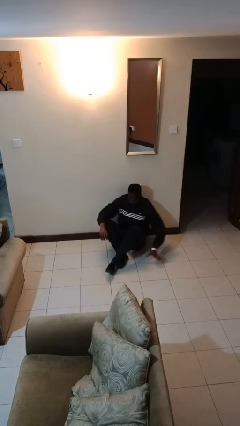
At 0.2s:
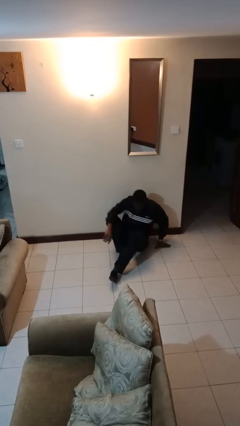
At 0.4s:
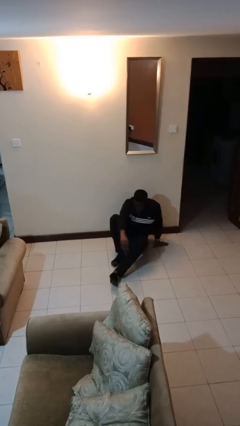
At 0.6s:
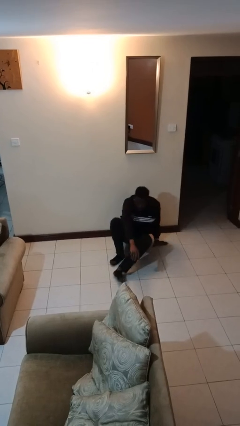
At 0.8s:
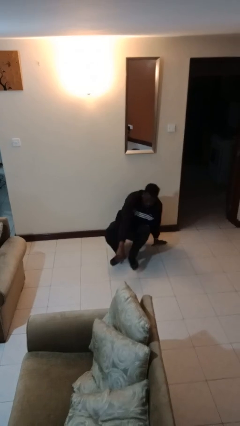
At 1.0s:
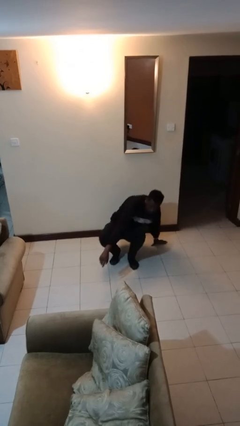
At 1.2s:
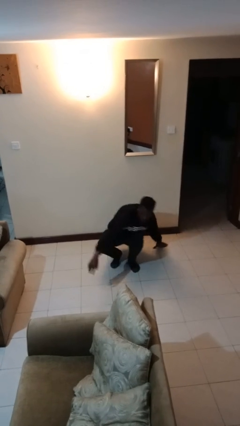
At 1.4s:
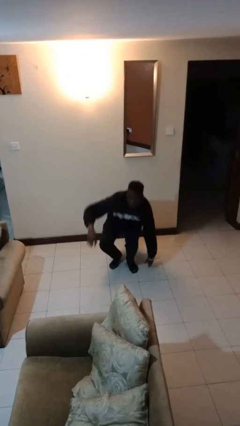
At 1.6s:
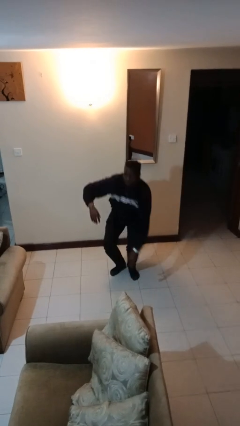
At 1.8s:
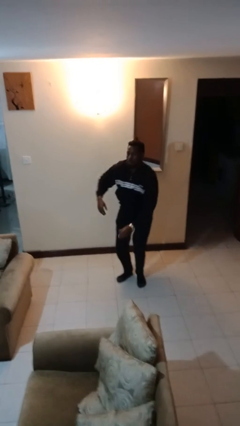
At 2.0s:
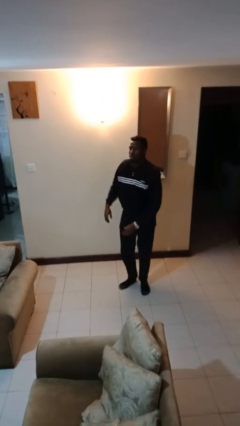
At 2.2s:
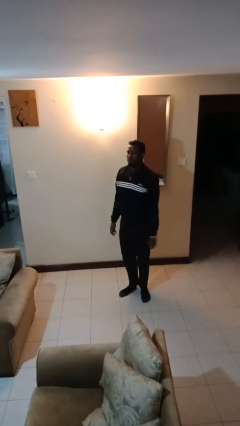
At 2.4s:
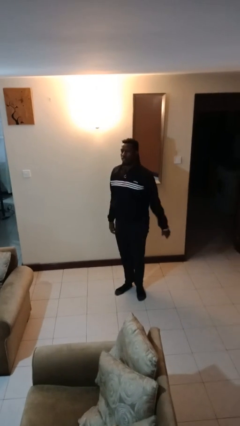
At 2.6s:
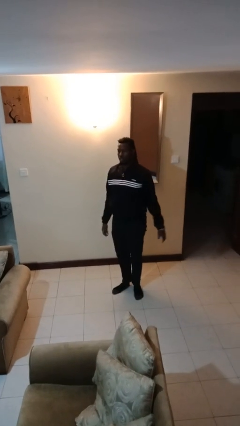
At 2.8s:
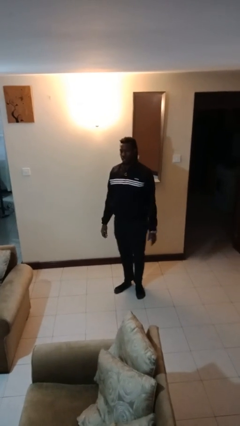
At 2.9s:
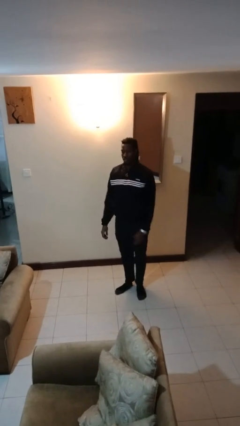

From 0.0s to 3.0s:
person stands up from floor

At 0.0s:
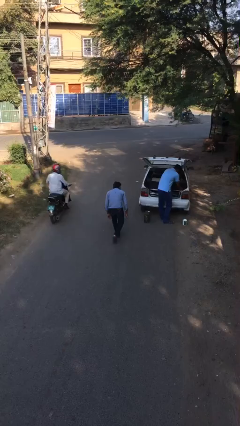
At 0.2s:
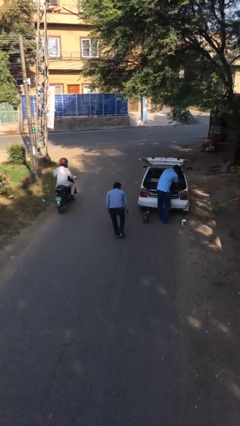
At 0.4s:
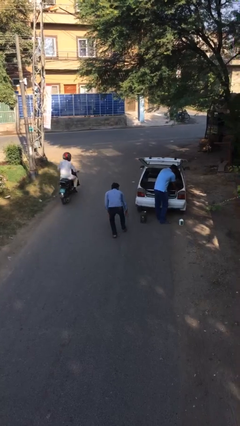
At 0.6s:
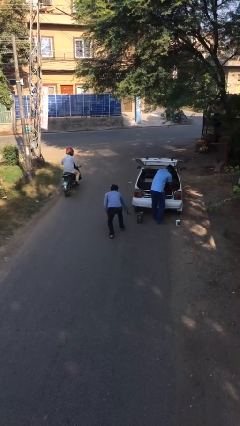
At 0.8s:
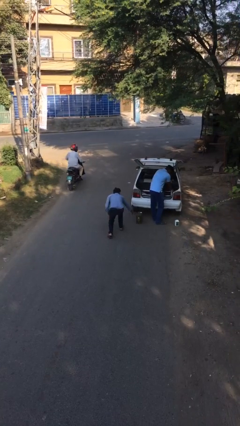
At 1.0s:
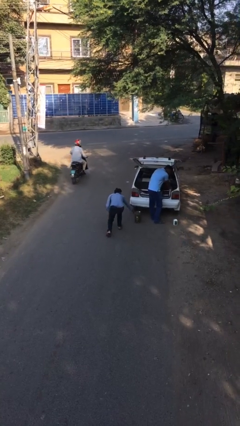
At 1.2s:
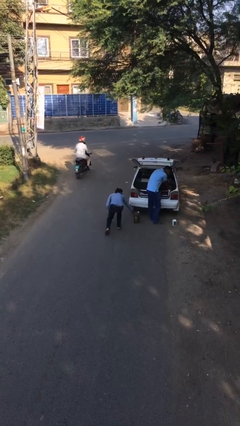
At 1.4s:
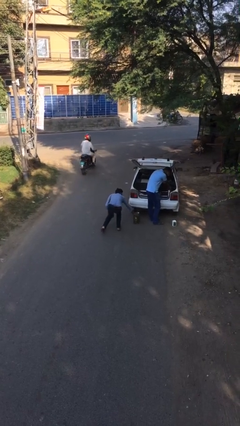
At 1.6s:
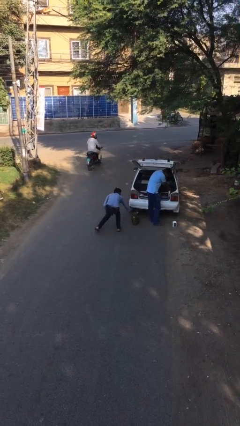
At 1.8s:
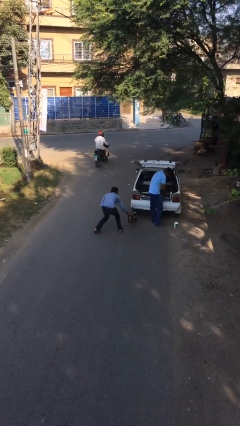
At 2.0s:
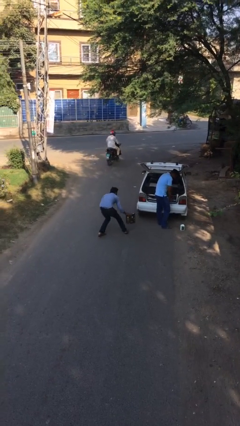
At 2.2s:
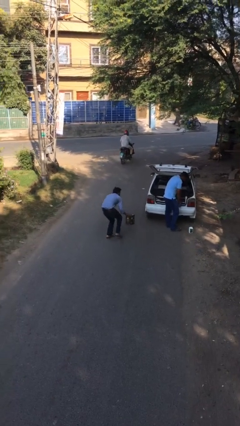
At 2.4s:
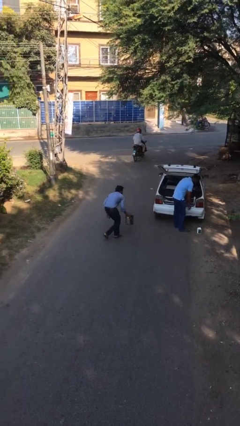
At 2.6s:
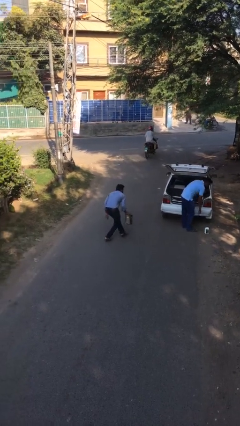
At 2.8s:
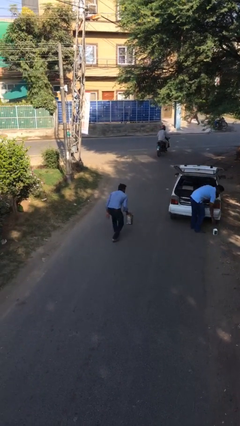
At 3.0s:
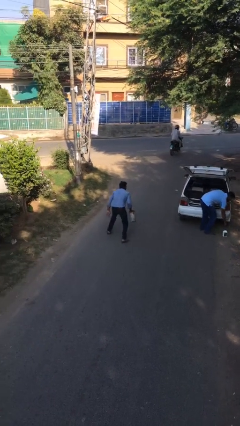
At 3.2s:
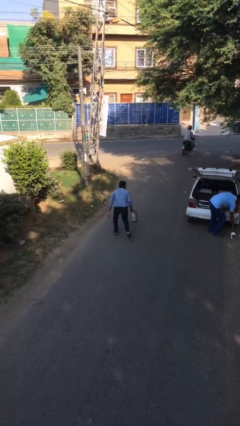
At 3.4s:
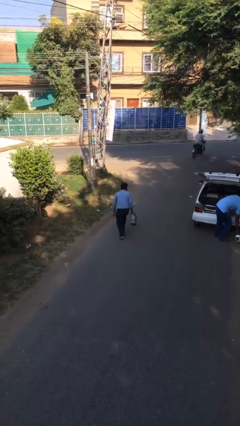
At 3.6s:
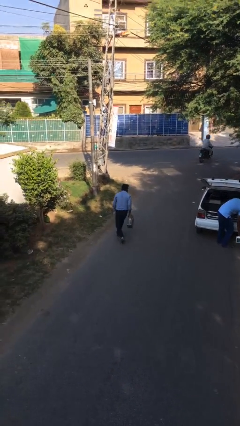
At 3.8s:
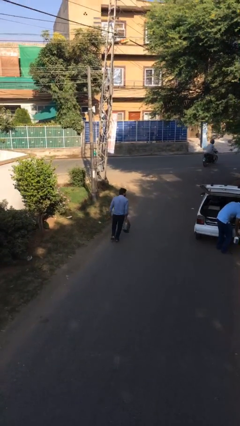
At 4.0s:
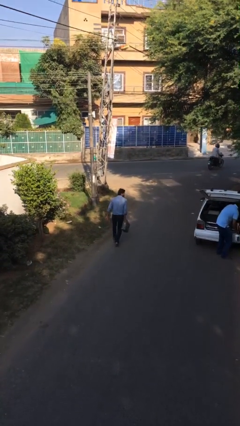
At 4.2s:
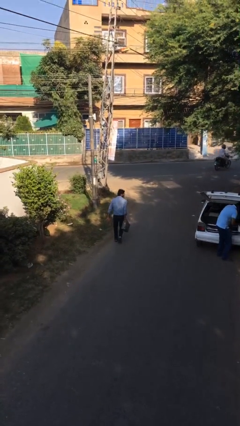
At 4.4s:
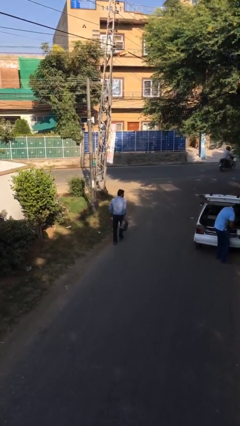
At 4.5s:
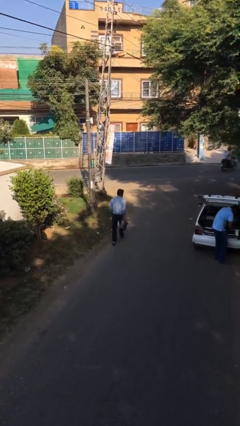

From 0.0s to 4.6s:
person steals object from person

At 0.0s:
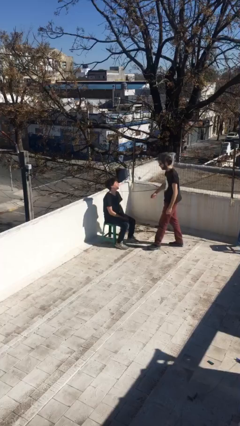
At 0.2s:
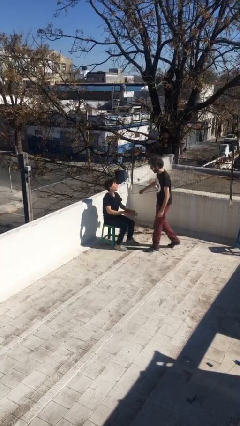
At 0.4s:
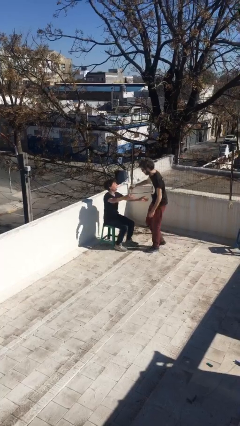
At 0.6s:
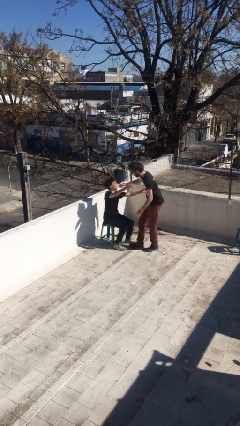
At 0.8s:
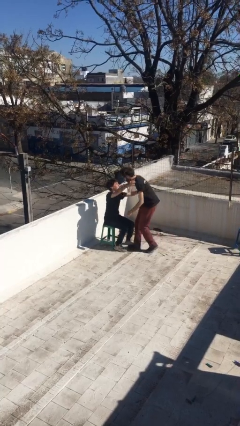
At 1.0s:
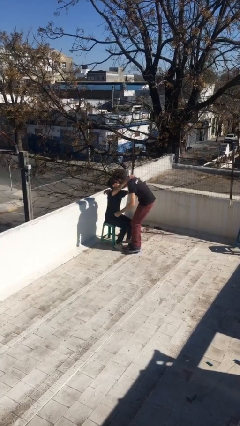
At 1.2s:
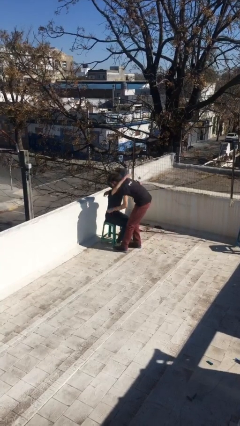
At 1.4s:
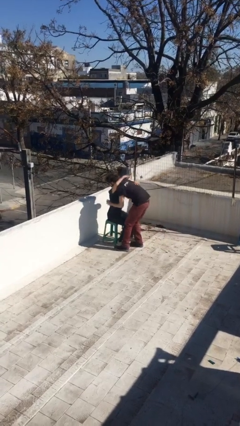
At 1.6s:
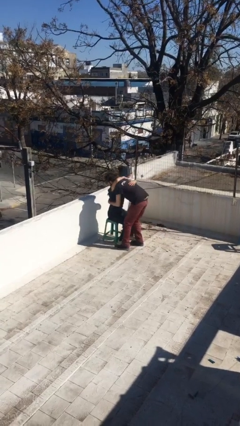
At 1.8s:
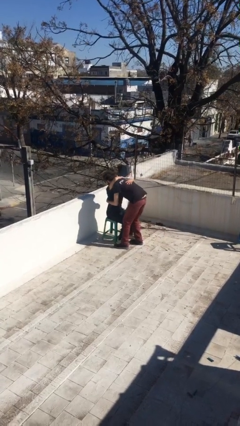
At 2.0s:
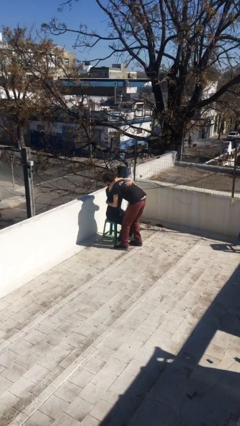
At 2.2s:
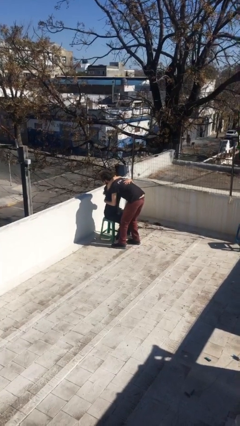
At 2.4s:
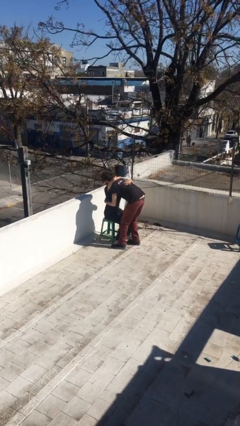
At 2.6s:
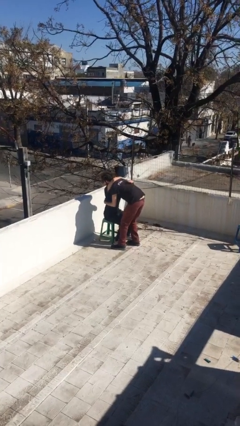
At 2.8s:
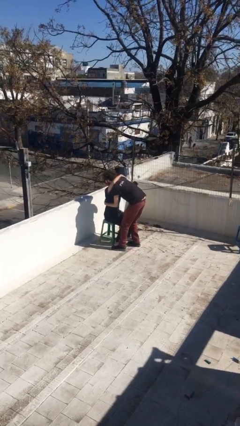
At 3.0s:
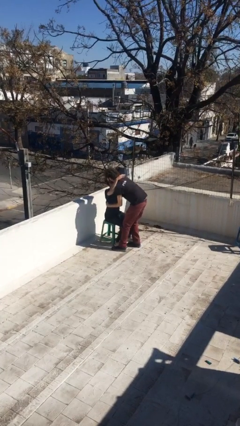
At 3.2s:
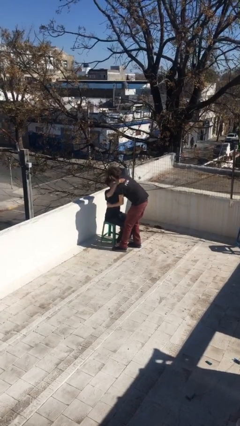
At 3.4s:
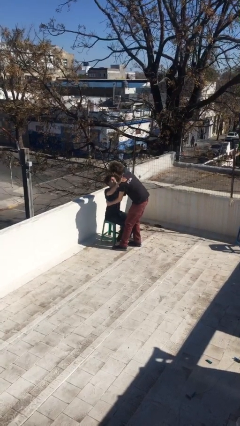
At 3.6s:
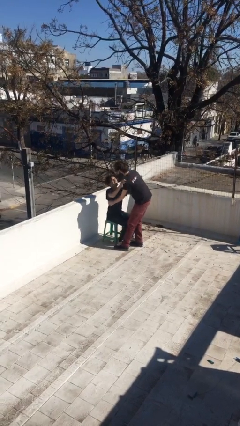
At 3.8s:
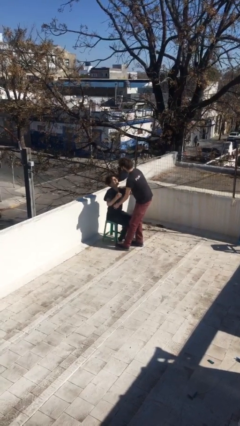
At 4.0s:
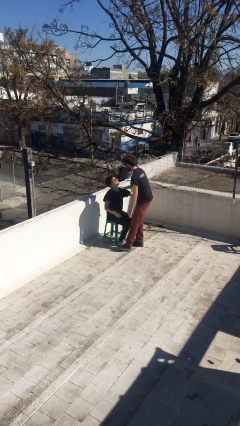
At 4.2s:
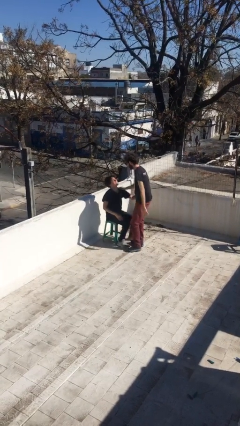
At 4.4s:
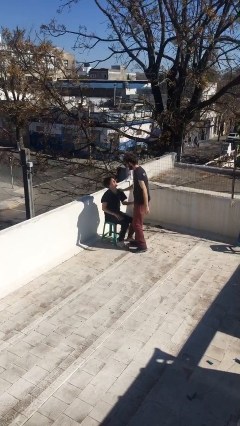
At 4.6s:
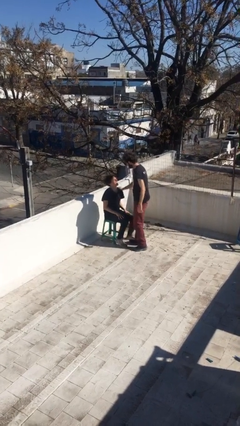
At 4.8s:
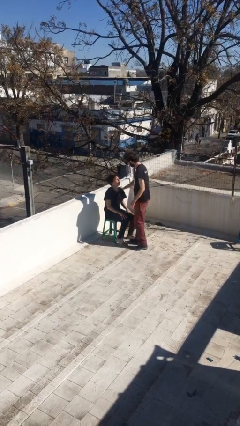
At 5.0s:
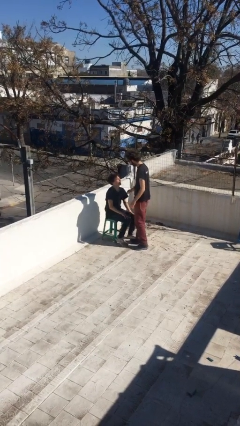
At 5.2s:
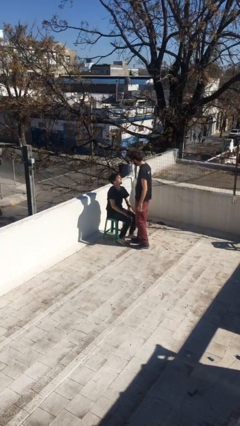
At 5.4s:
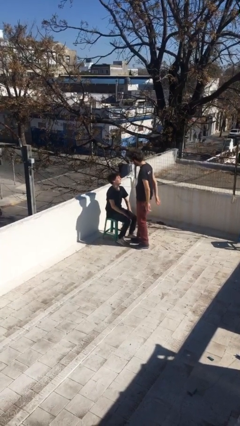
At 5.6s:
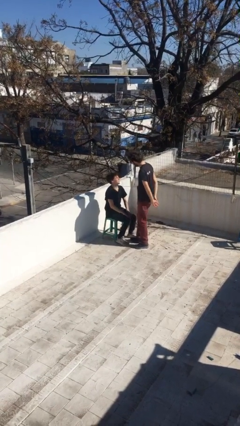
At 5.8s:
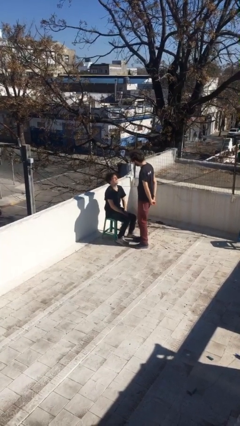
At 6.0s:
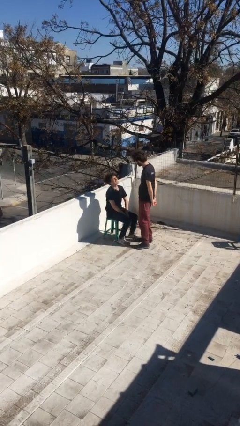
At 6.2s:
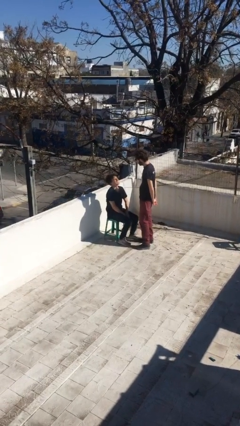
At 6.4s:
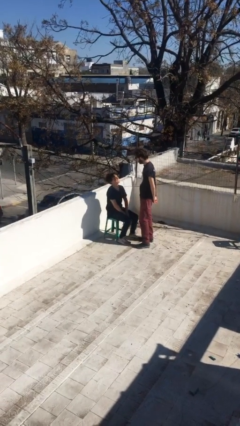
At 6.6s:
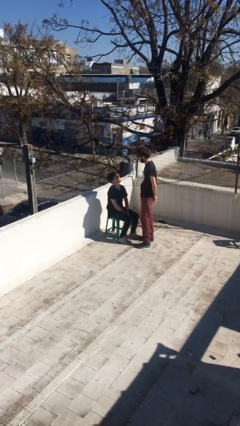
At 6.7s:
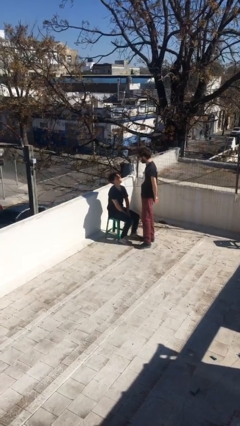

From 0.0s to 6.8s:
person embraces person

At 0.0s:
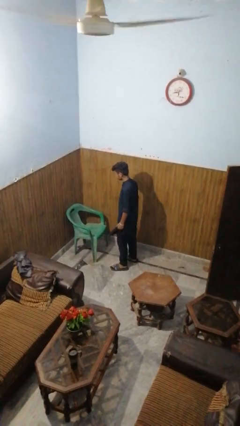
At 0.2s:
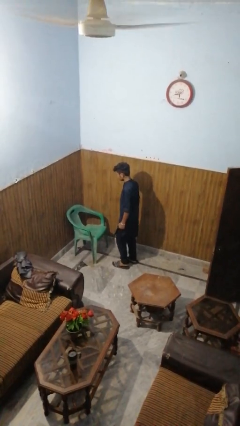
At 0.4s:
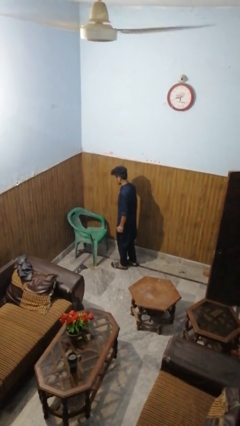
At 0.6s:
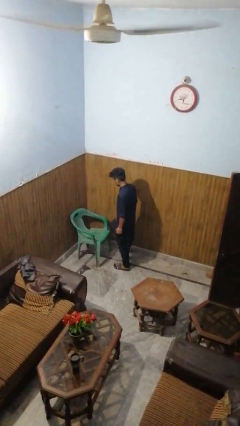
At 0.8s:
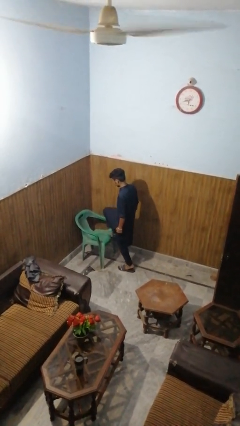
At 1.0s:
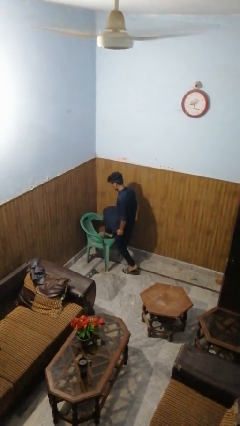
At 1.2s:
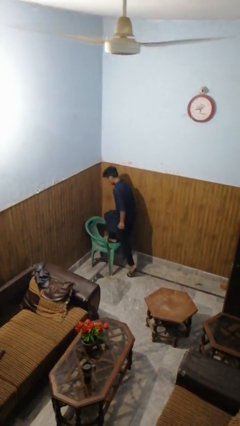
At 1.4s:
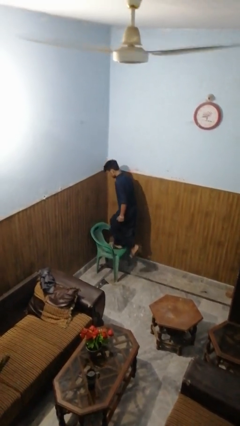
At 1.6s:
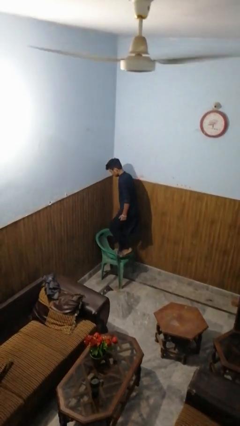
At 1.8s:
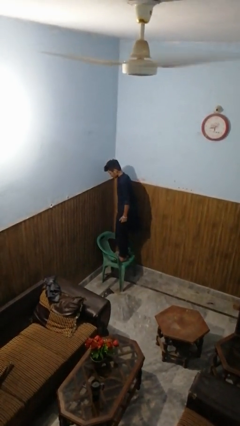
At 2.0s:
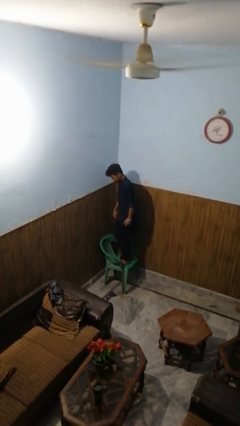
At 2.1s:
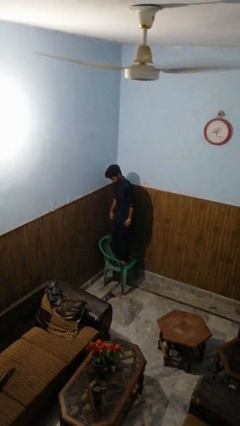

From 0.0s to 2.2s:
person climbs on chair

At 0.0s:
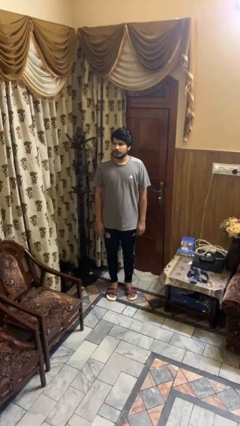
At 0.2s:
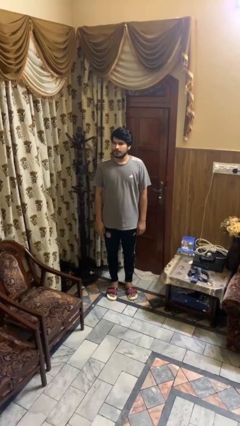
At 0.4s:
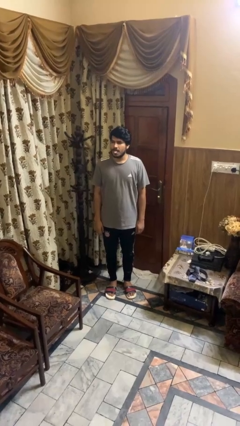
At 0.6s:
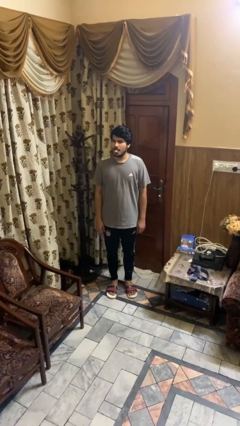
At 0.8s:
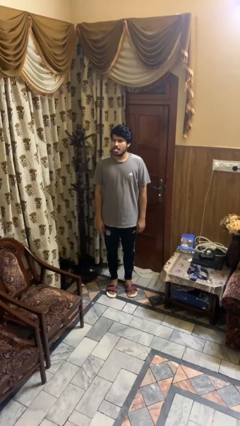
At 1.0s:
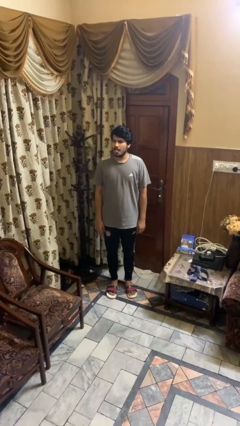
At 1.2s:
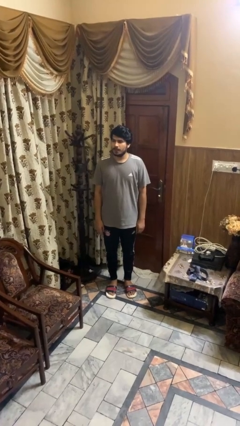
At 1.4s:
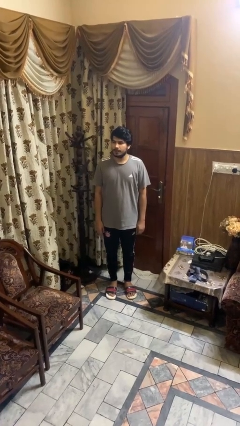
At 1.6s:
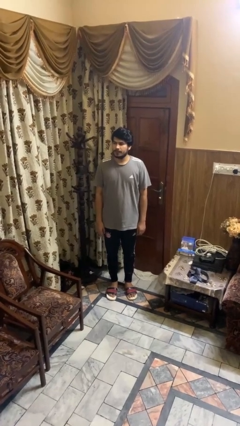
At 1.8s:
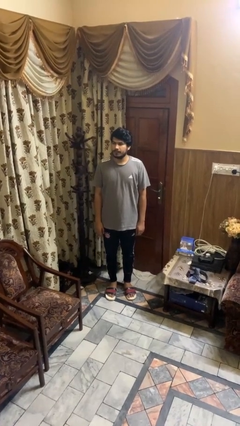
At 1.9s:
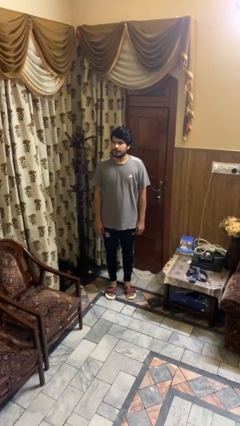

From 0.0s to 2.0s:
person sticks out tongue
